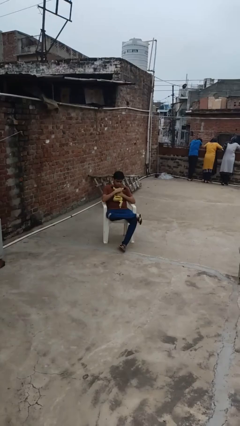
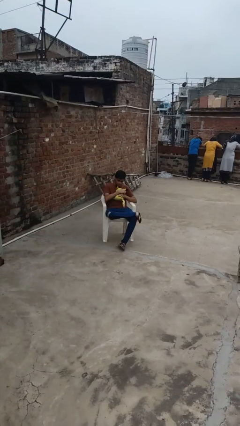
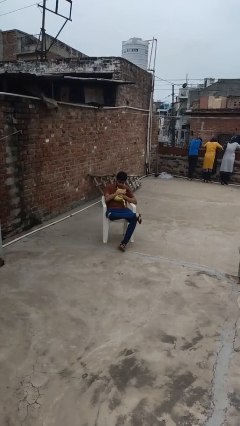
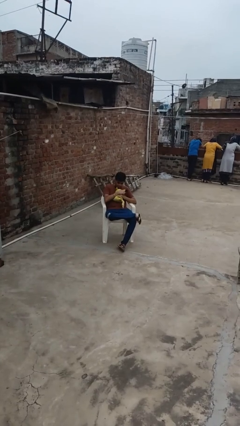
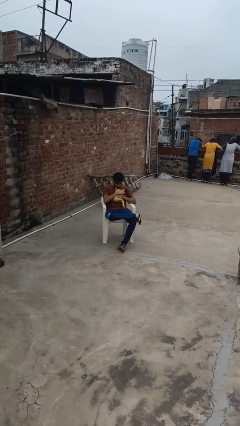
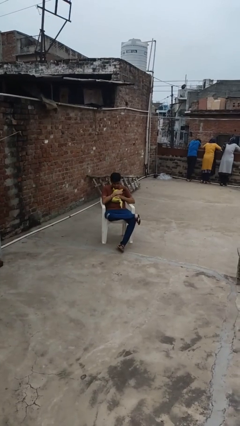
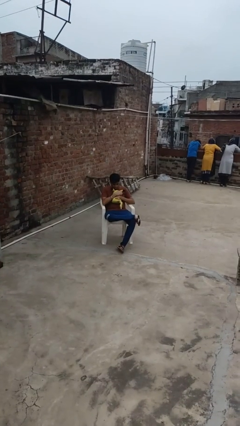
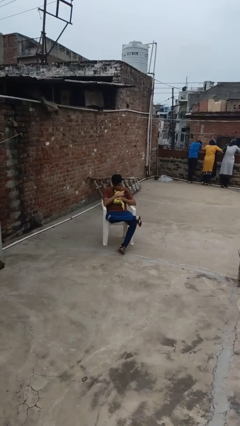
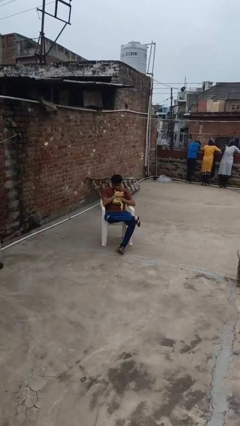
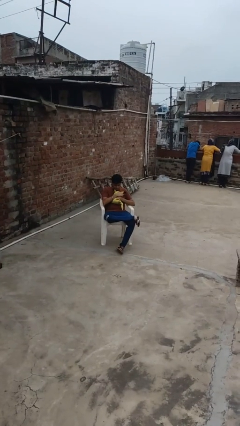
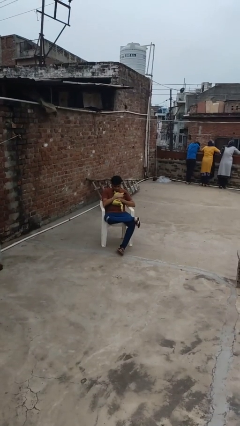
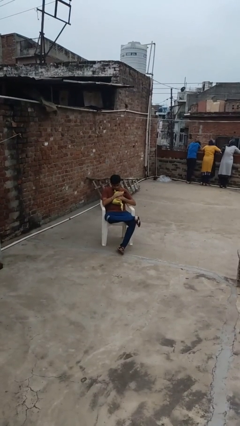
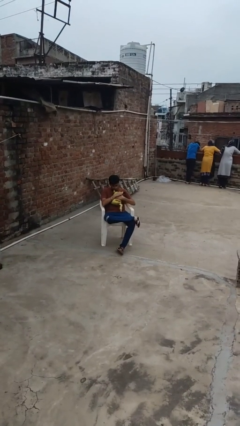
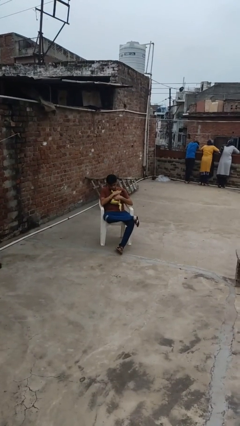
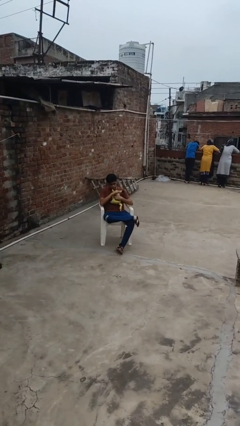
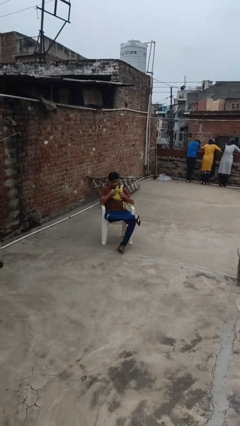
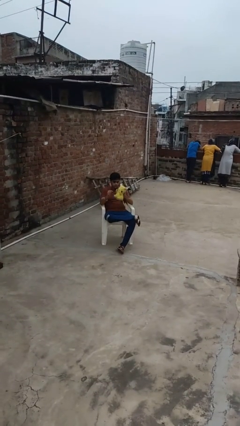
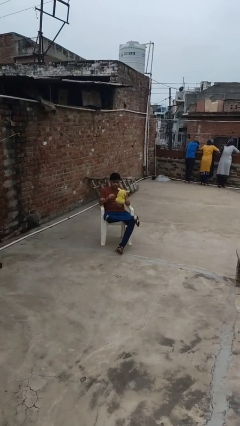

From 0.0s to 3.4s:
person hugs stuffed animal

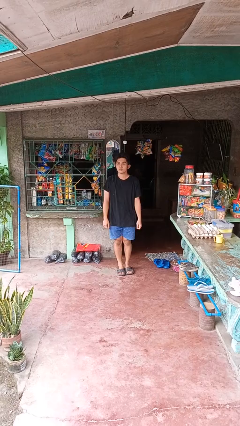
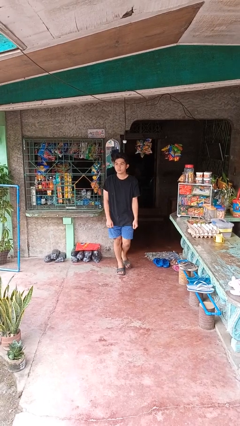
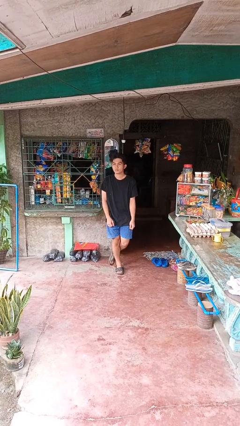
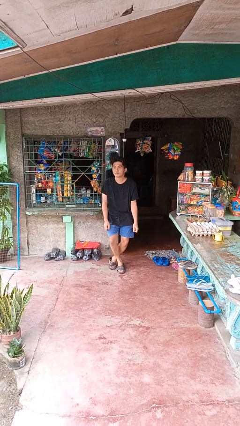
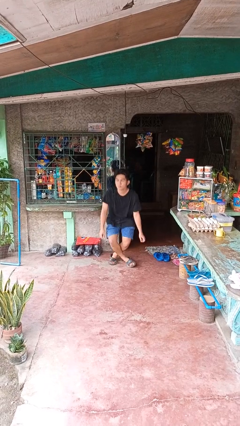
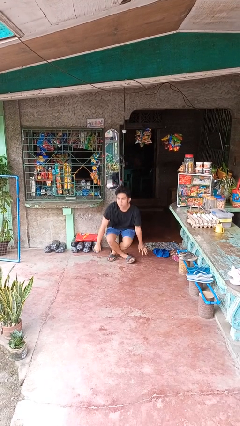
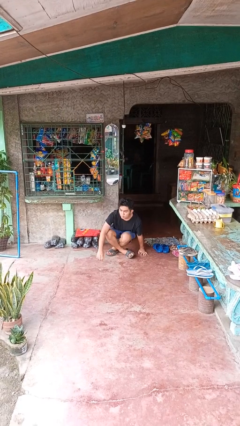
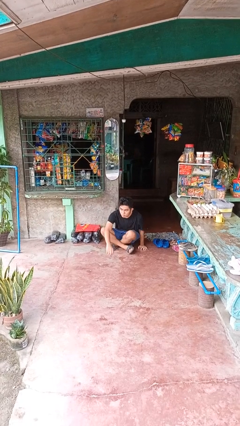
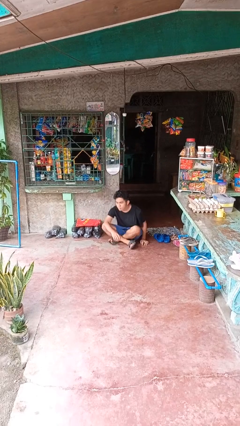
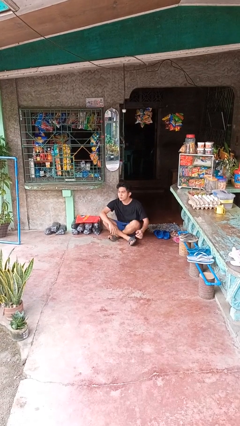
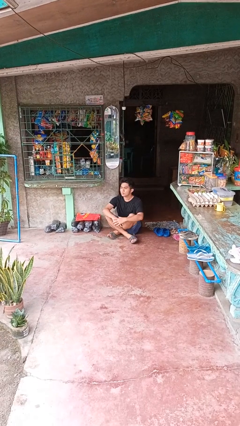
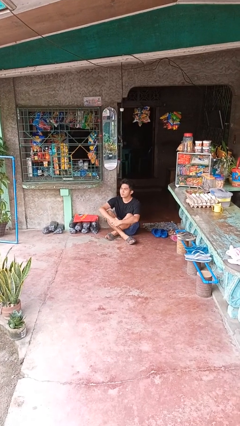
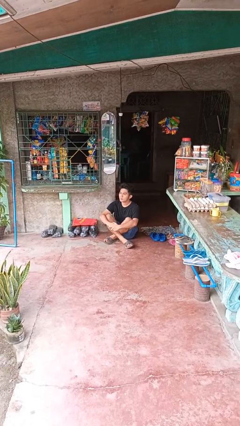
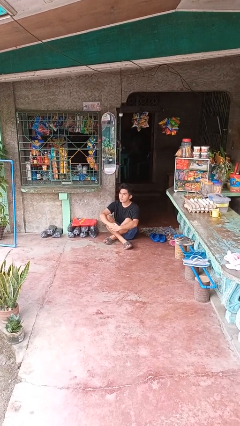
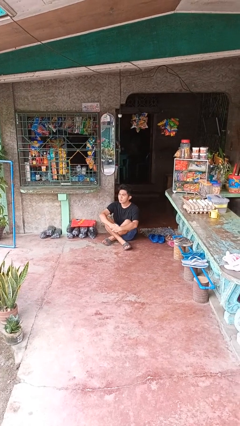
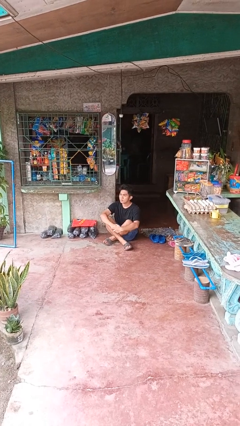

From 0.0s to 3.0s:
person sits crisscross

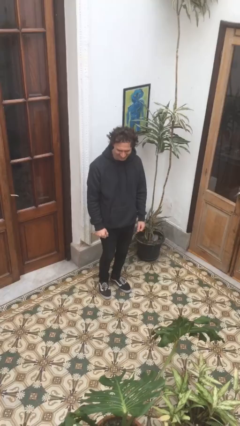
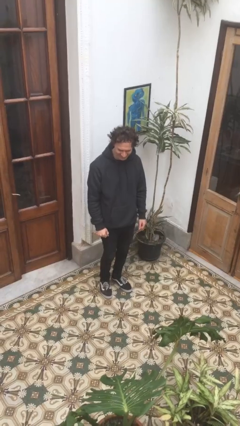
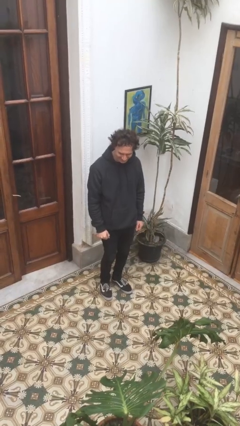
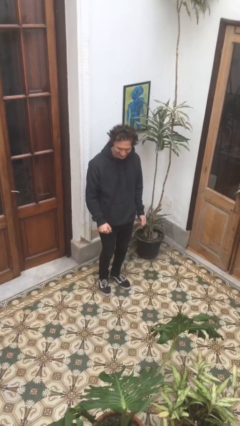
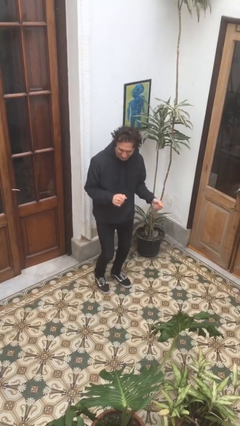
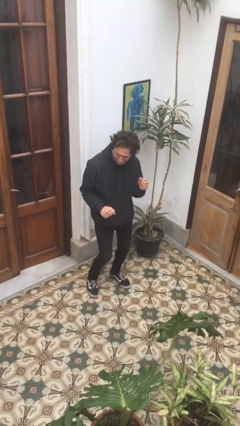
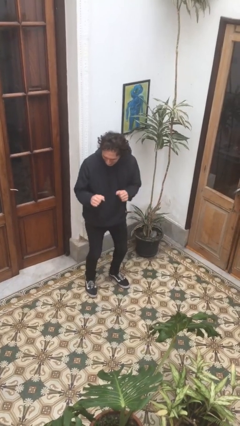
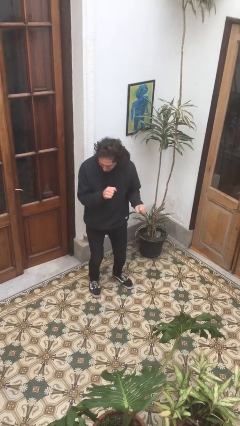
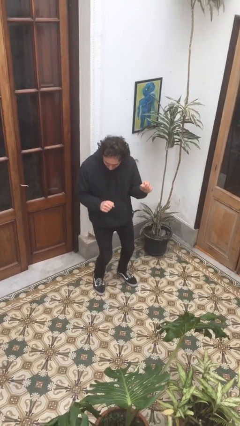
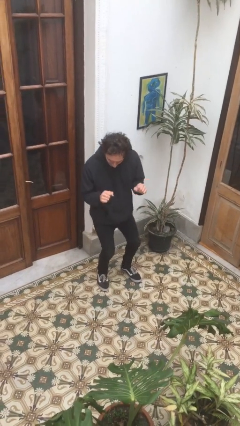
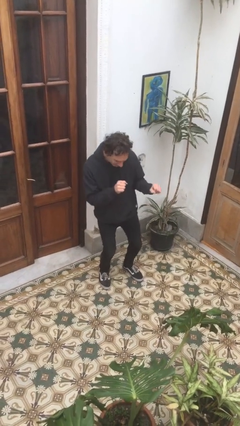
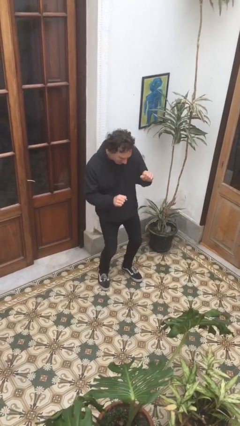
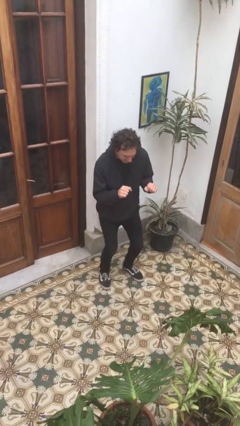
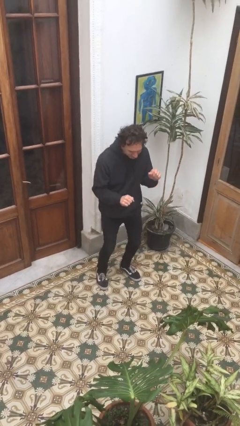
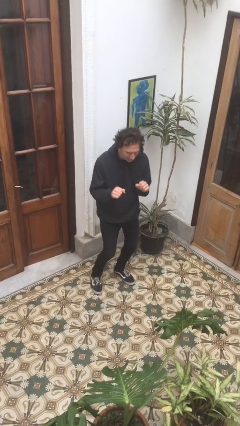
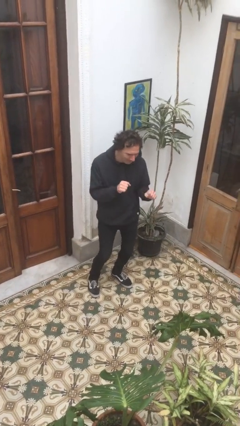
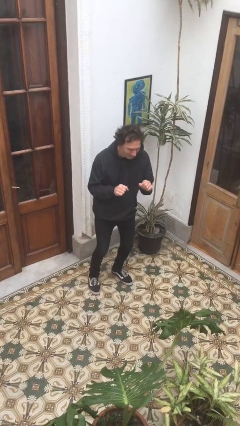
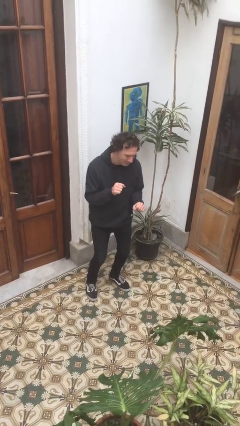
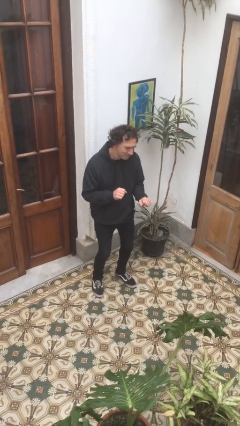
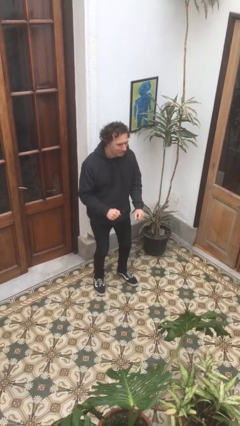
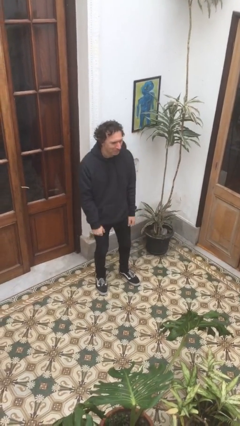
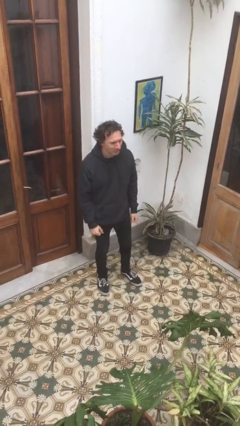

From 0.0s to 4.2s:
person dances in place

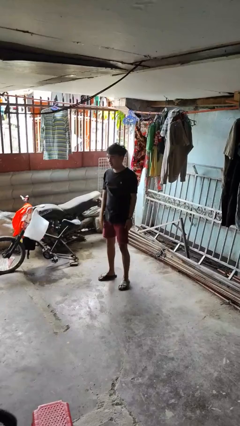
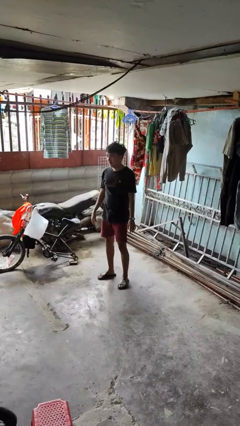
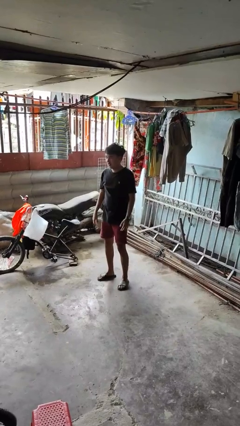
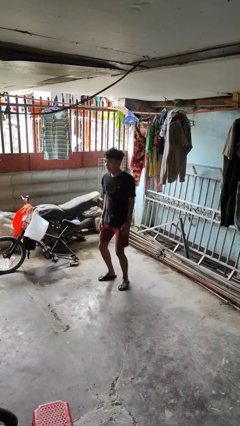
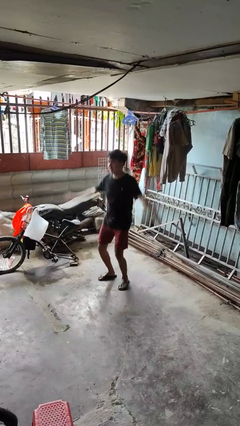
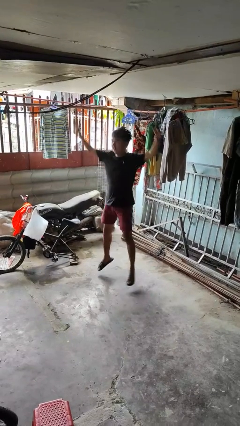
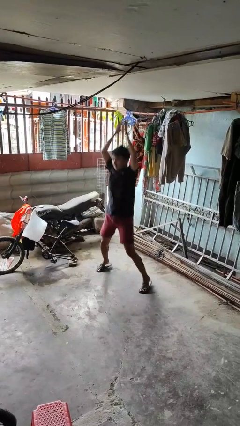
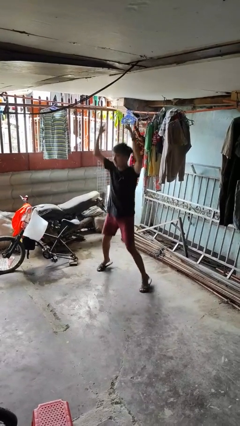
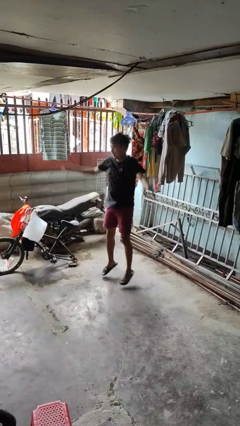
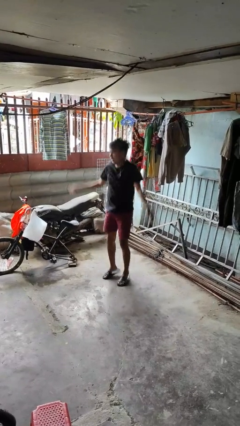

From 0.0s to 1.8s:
person exercises with jumping jacks

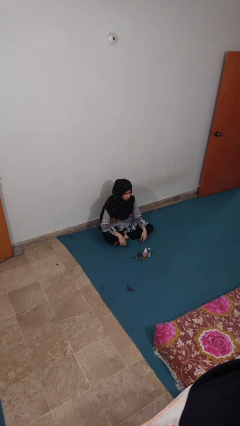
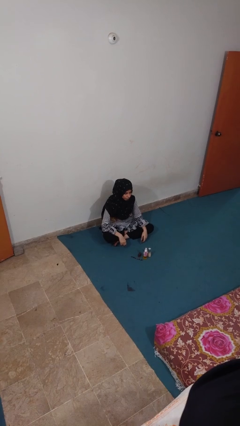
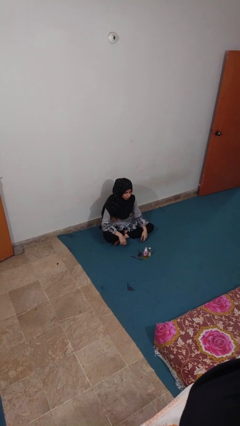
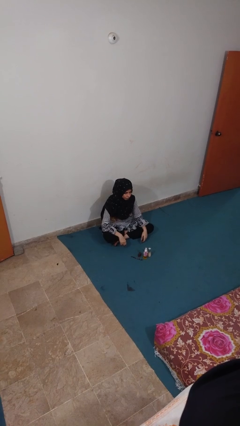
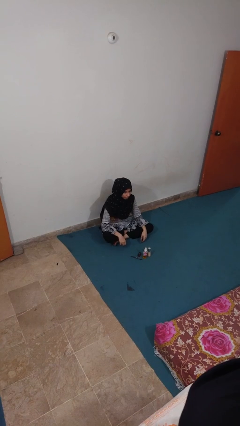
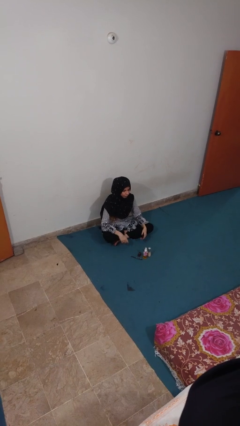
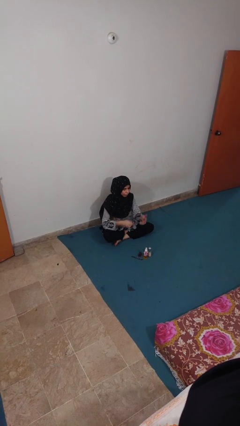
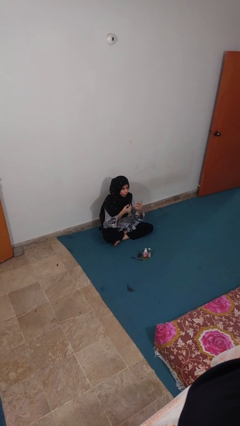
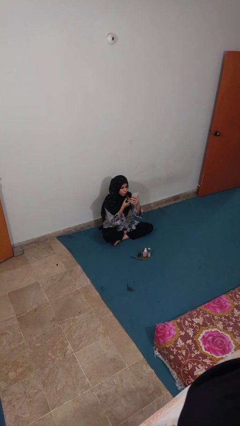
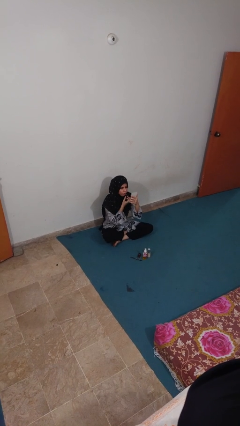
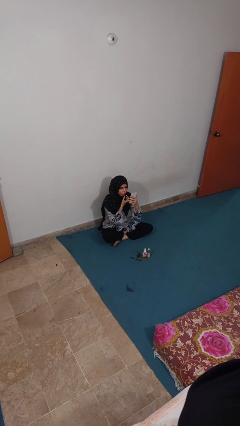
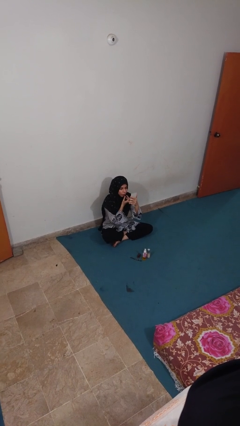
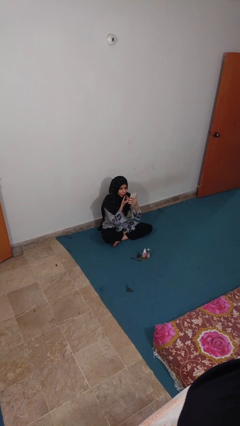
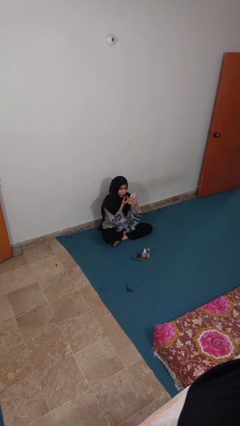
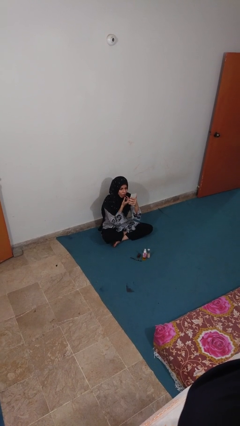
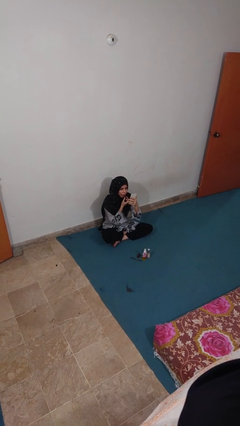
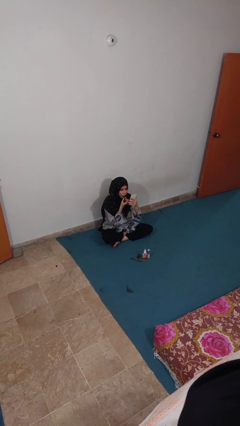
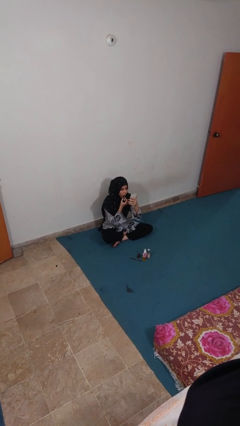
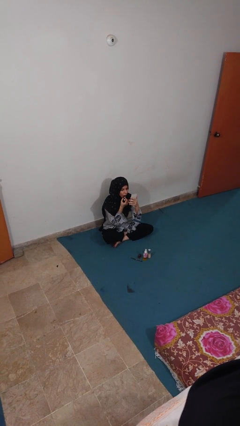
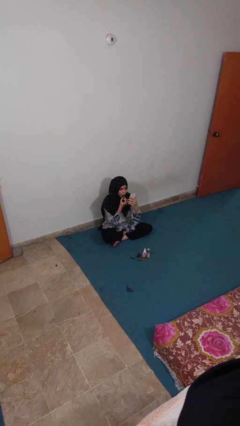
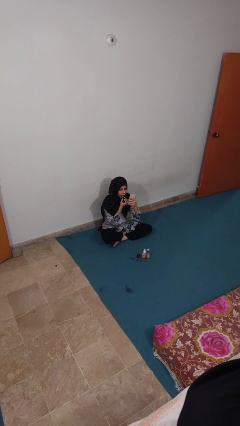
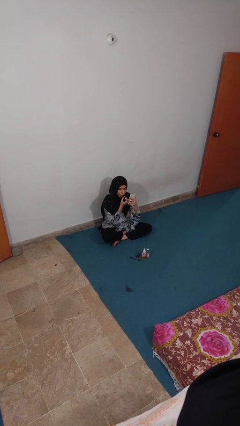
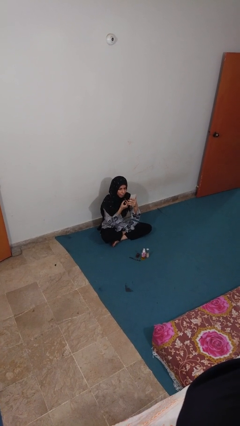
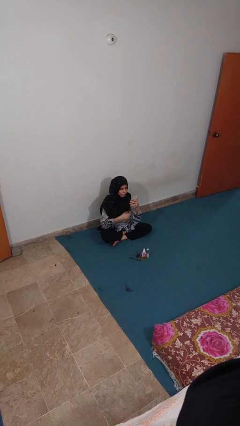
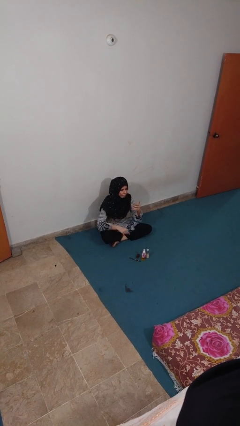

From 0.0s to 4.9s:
person applies lip makeup

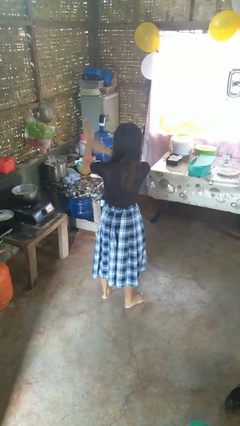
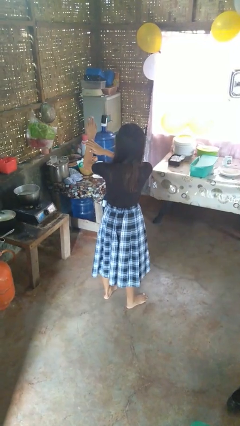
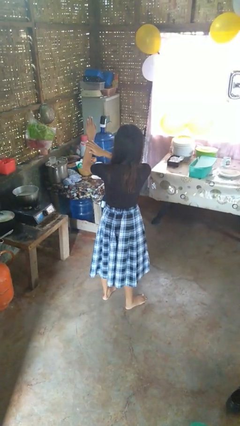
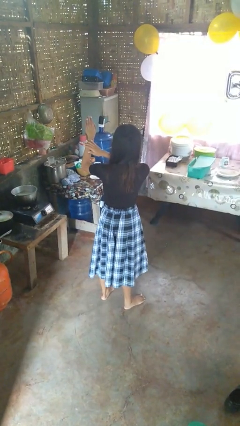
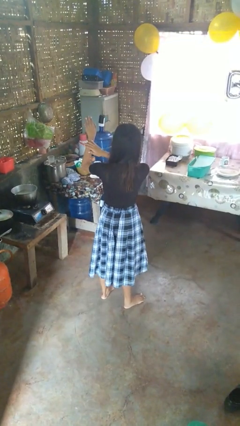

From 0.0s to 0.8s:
person swats bug
